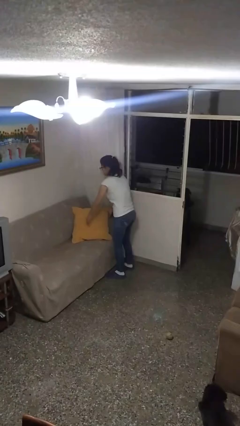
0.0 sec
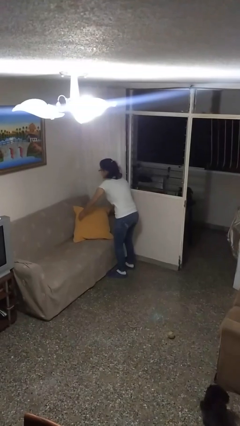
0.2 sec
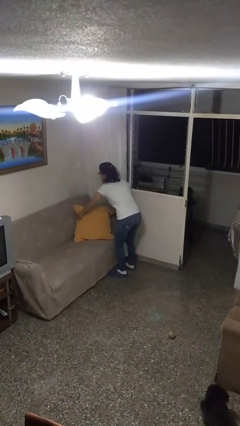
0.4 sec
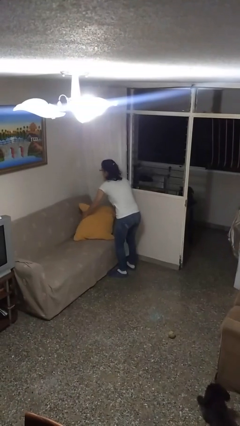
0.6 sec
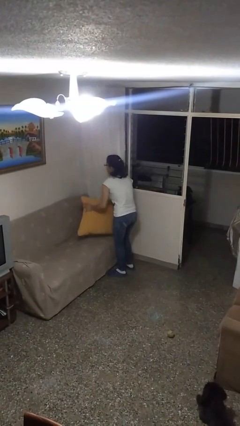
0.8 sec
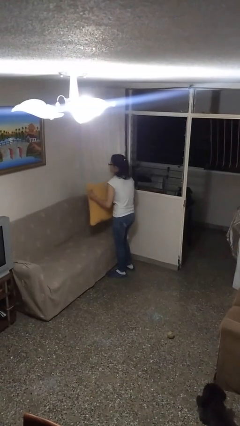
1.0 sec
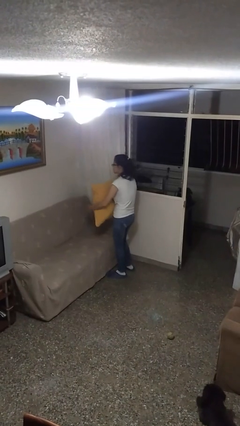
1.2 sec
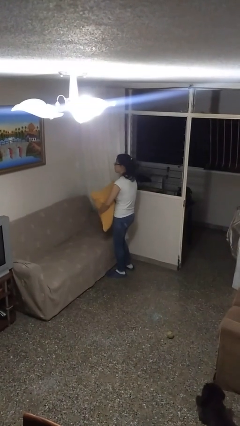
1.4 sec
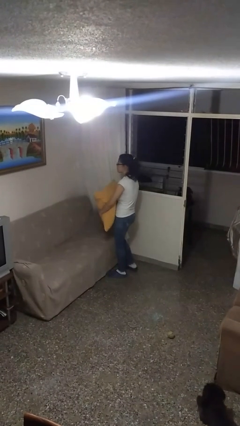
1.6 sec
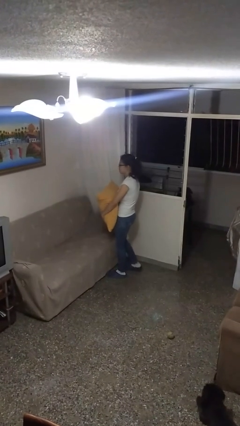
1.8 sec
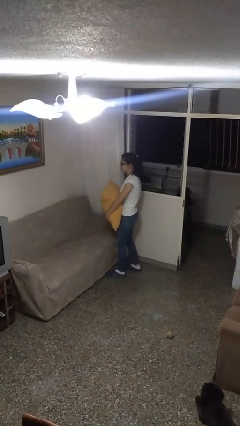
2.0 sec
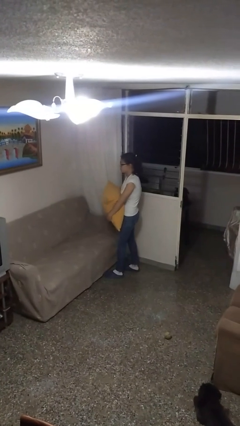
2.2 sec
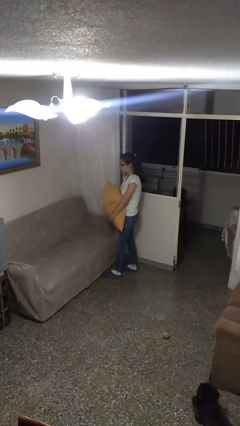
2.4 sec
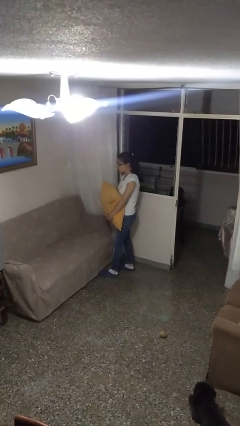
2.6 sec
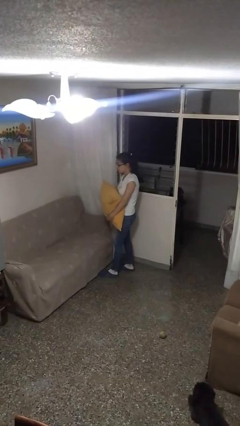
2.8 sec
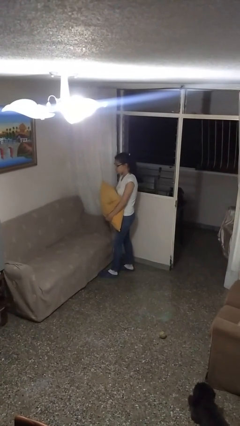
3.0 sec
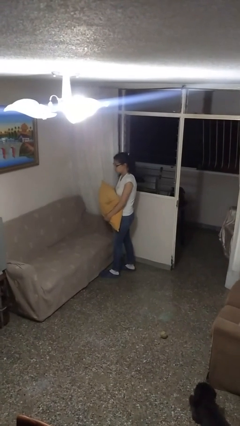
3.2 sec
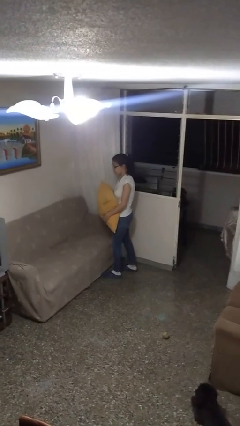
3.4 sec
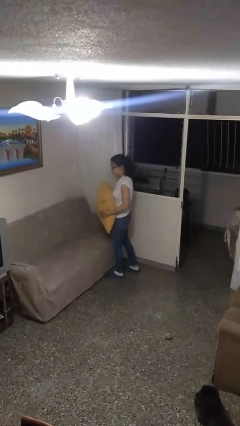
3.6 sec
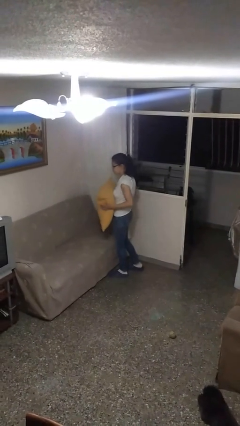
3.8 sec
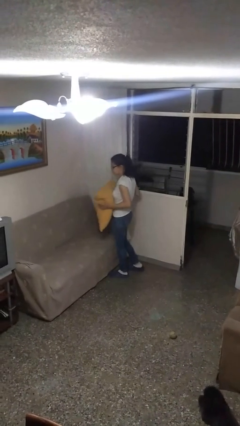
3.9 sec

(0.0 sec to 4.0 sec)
person picks up object from couch

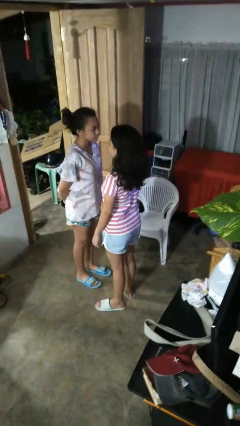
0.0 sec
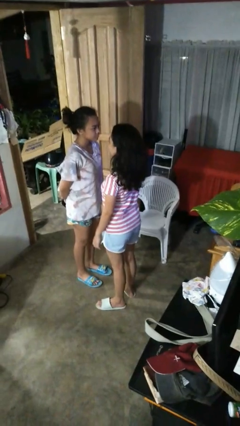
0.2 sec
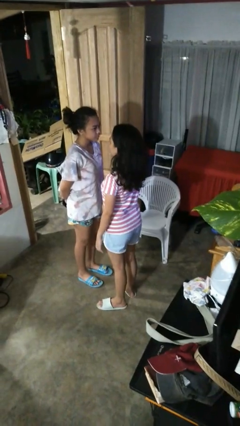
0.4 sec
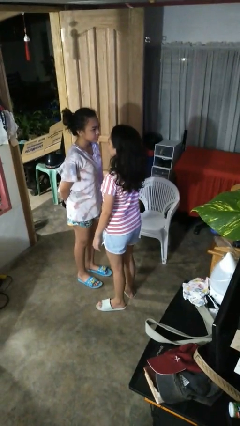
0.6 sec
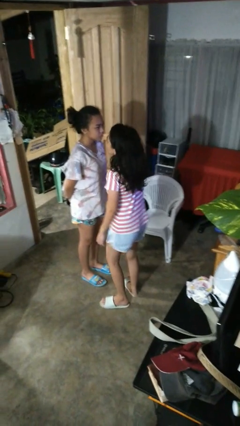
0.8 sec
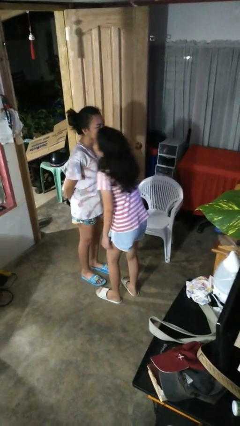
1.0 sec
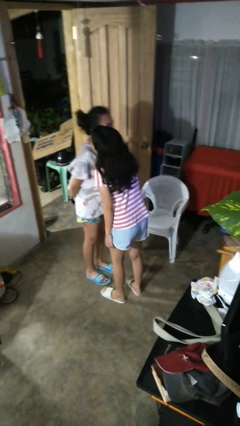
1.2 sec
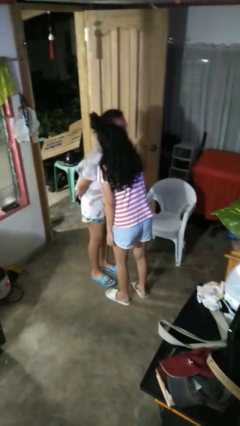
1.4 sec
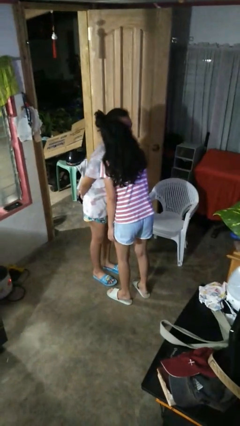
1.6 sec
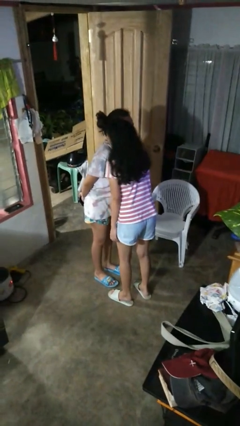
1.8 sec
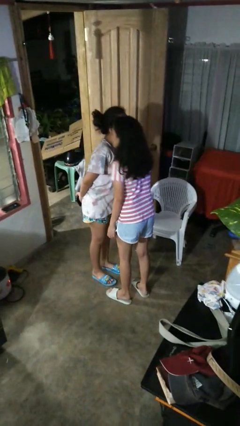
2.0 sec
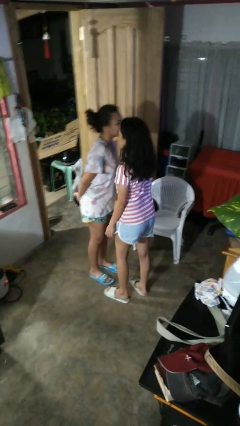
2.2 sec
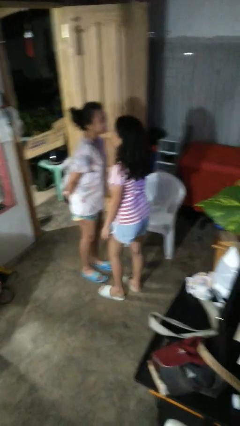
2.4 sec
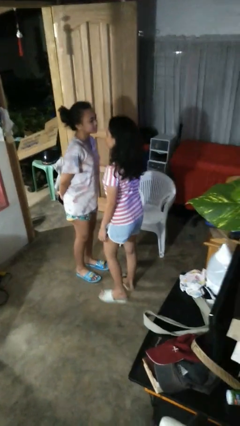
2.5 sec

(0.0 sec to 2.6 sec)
person kisses cheek of person

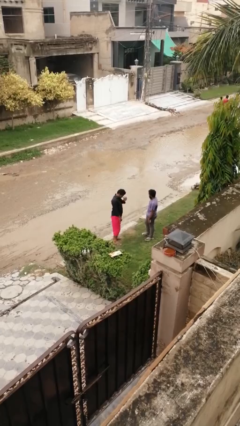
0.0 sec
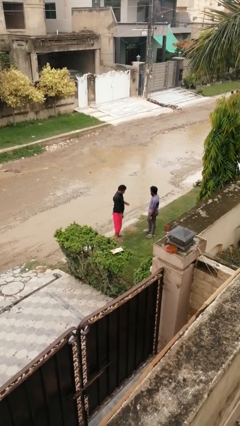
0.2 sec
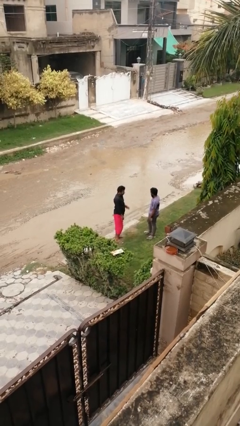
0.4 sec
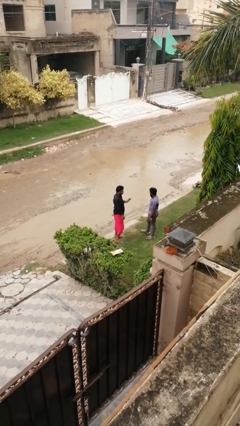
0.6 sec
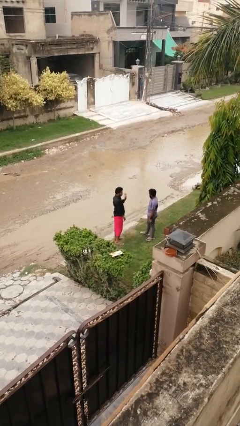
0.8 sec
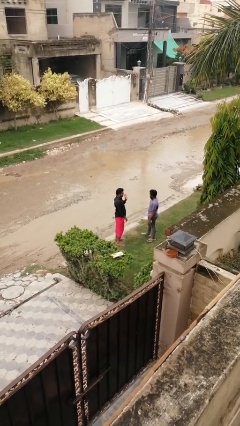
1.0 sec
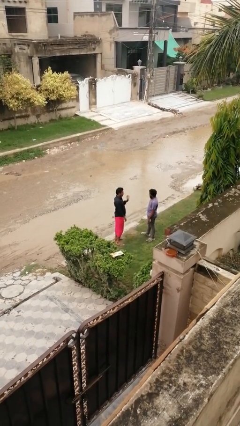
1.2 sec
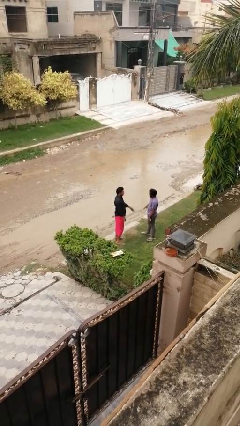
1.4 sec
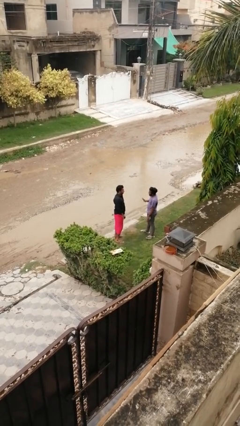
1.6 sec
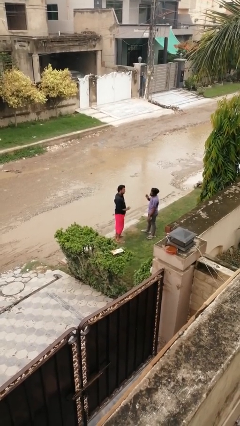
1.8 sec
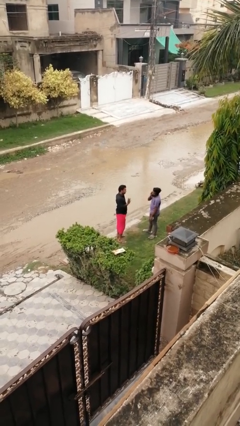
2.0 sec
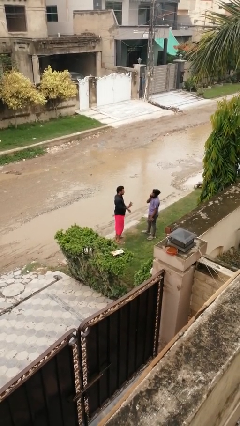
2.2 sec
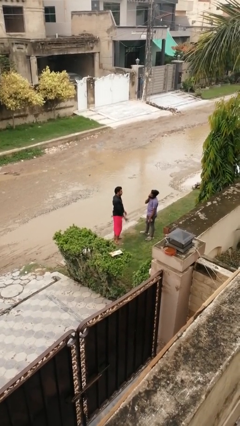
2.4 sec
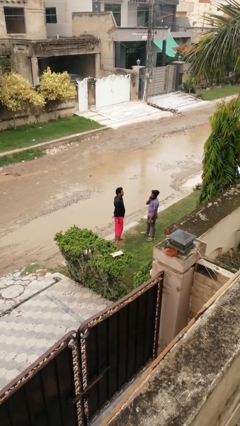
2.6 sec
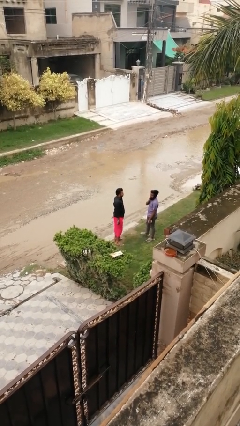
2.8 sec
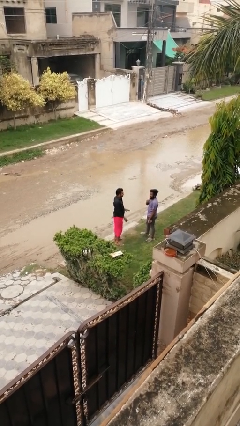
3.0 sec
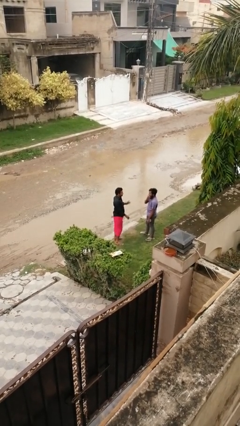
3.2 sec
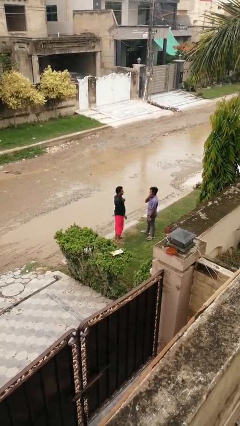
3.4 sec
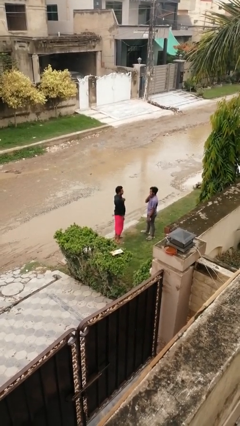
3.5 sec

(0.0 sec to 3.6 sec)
person talks to person

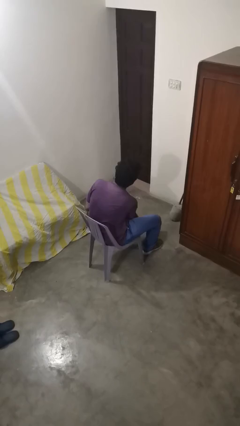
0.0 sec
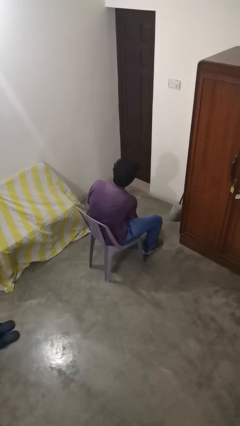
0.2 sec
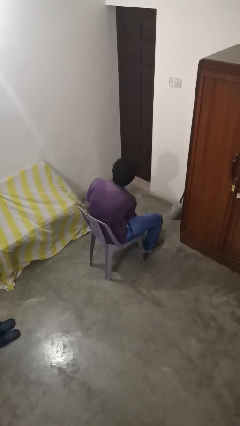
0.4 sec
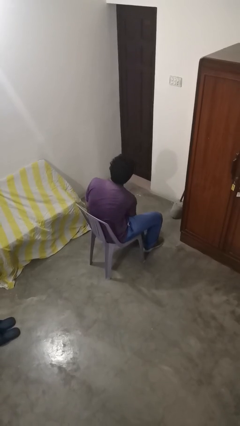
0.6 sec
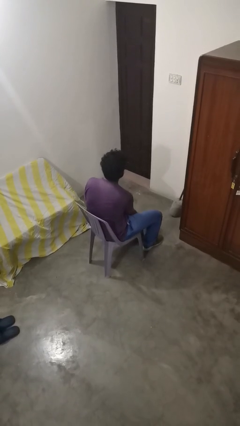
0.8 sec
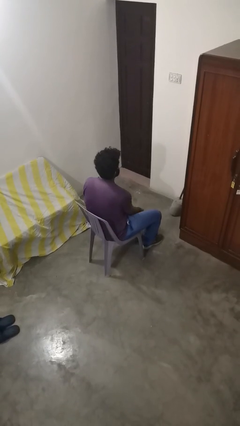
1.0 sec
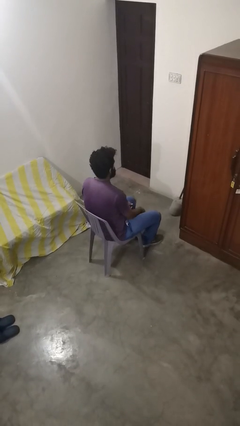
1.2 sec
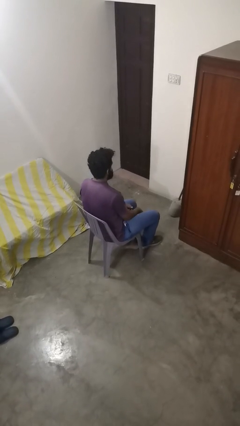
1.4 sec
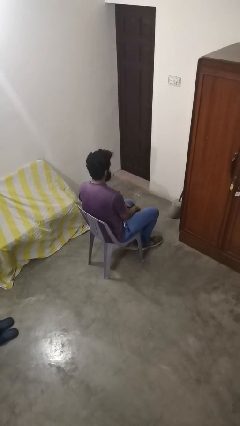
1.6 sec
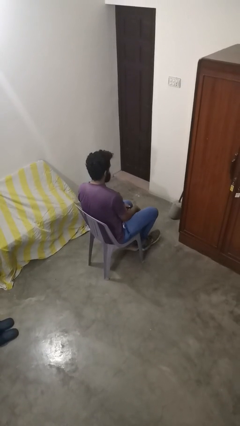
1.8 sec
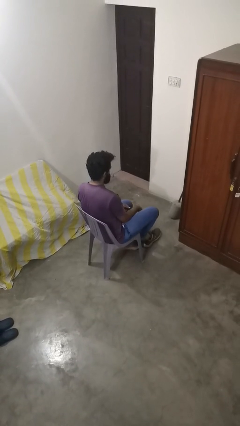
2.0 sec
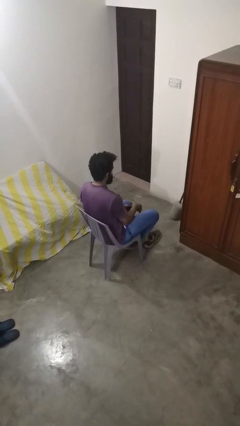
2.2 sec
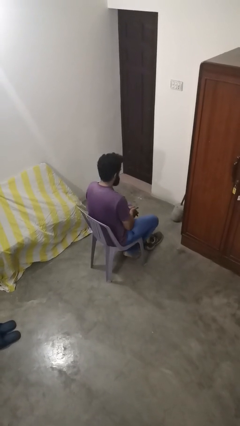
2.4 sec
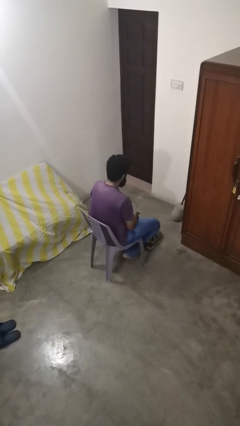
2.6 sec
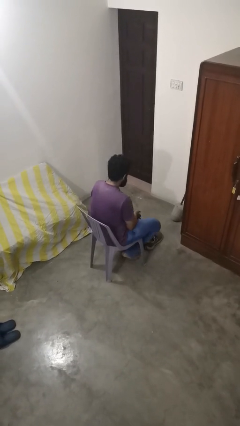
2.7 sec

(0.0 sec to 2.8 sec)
person takes off shoes

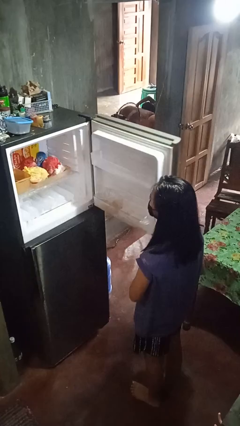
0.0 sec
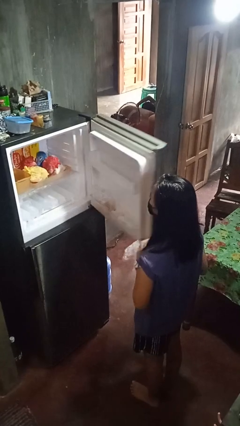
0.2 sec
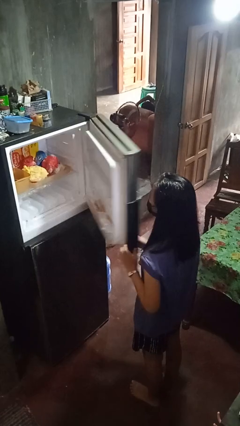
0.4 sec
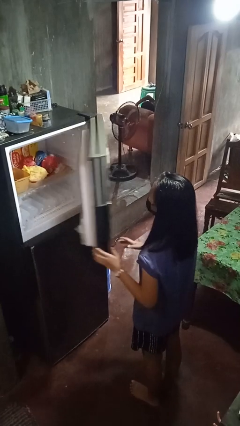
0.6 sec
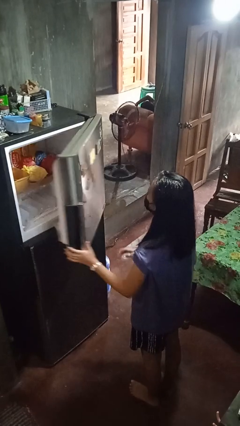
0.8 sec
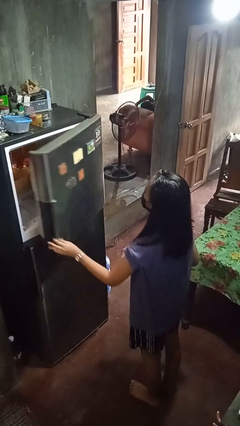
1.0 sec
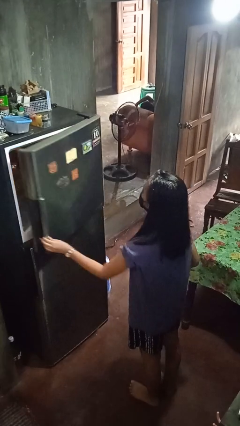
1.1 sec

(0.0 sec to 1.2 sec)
person closes refrigerator

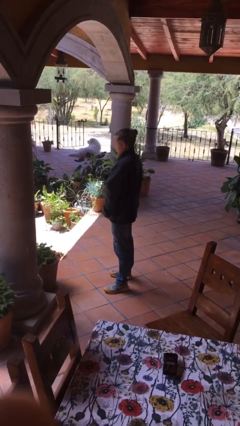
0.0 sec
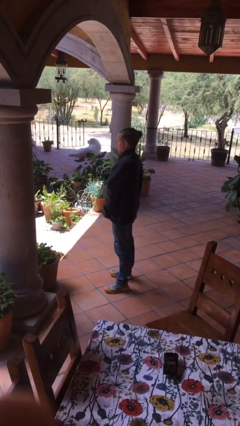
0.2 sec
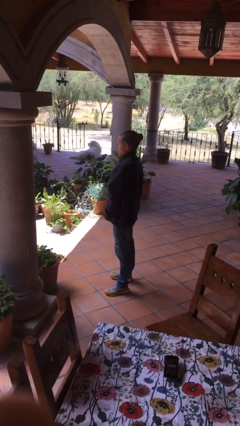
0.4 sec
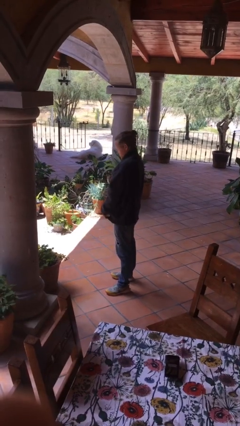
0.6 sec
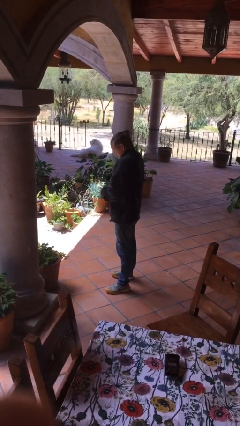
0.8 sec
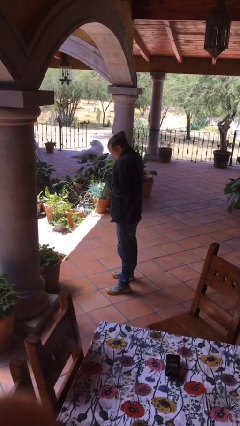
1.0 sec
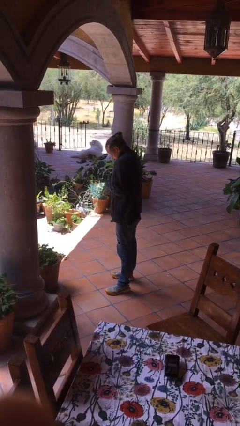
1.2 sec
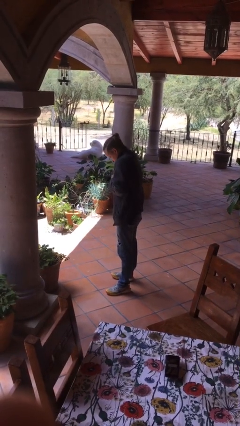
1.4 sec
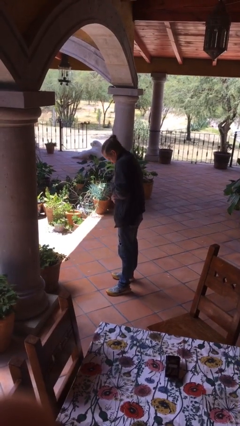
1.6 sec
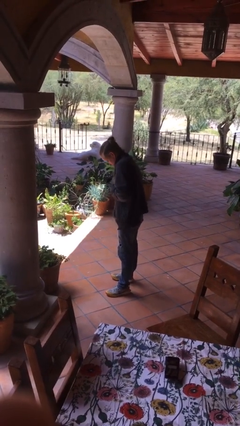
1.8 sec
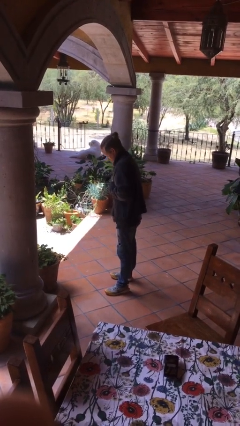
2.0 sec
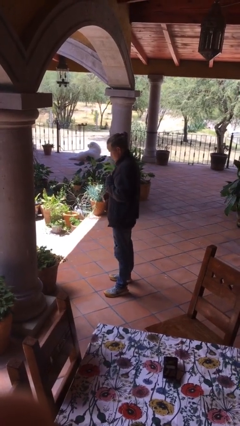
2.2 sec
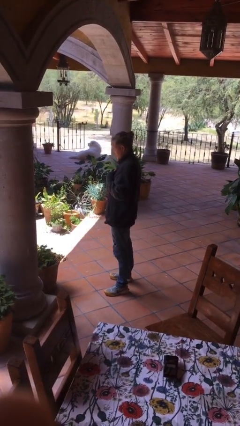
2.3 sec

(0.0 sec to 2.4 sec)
person unzips jacket

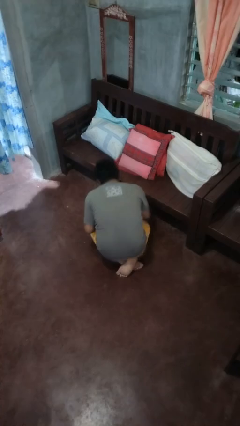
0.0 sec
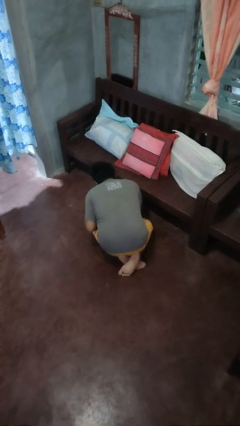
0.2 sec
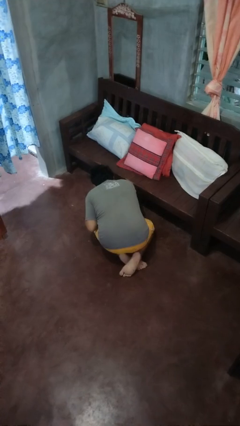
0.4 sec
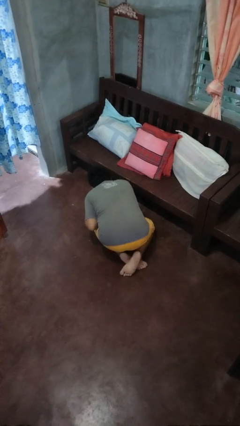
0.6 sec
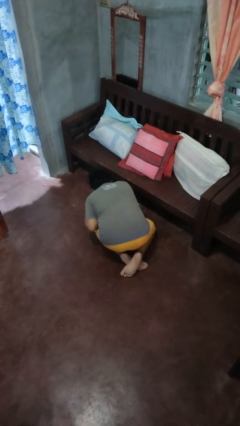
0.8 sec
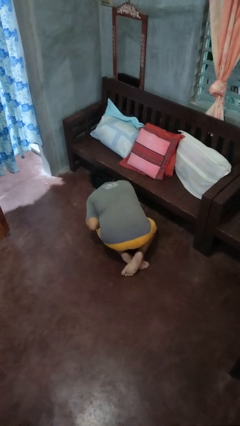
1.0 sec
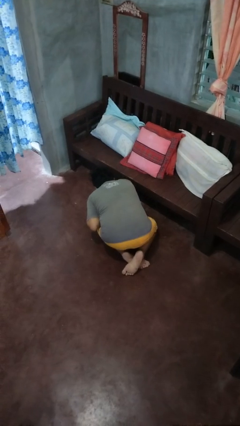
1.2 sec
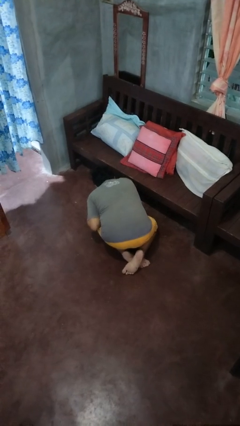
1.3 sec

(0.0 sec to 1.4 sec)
person searches under couch
